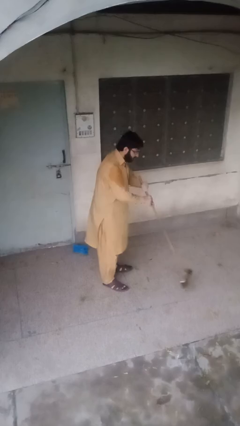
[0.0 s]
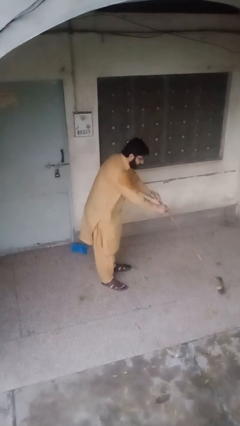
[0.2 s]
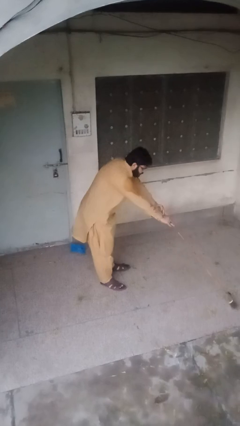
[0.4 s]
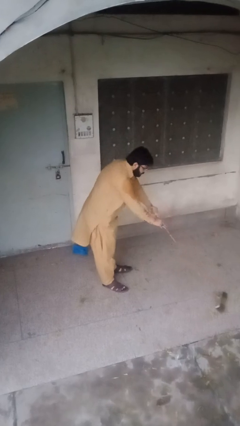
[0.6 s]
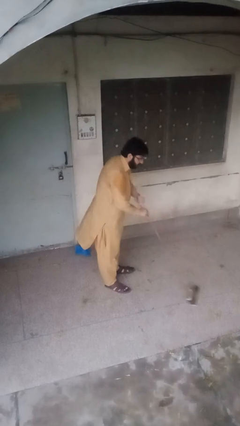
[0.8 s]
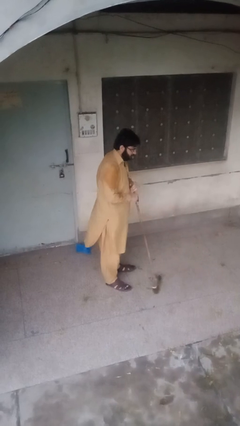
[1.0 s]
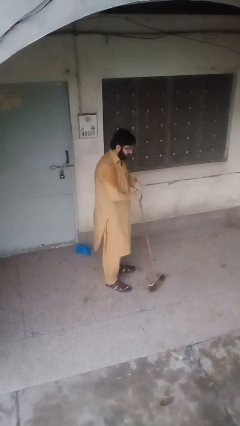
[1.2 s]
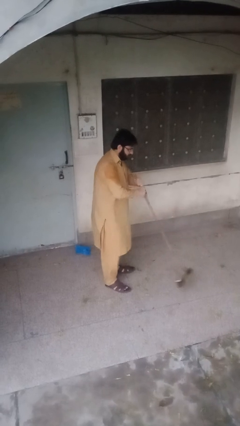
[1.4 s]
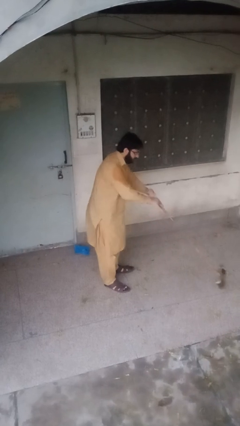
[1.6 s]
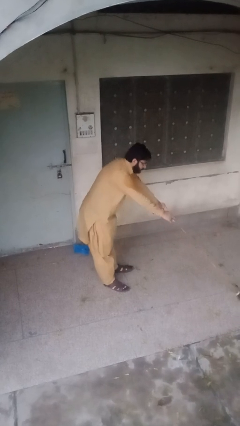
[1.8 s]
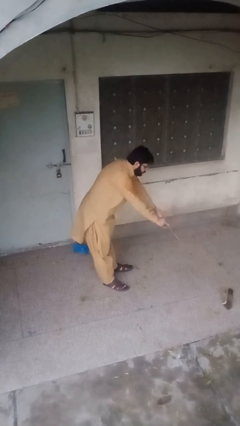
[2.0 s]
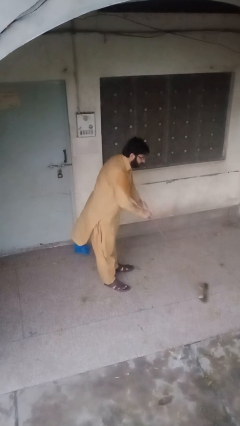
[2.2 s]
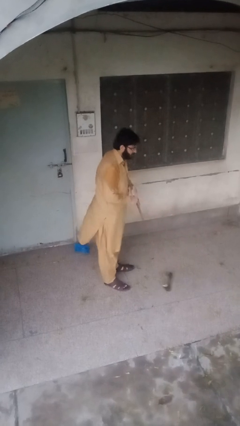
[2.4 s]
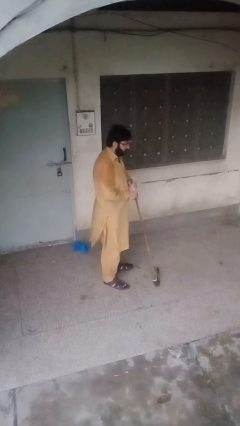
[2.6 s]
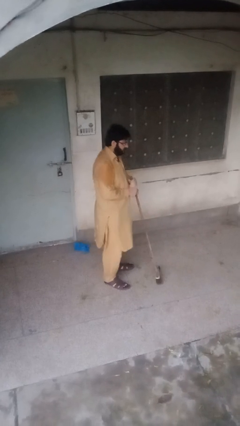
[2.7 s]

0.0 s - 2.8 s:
person sweeps floor

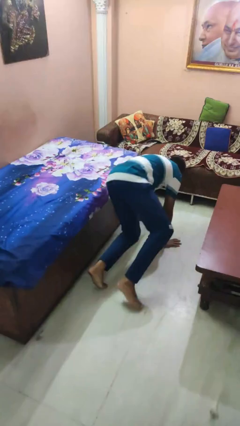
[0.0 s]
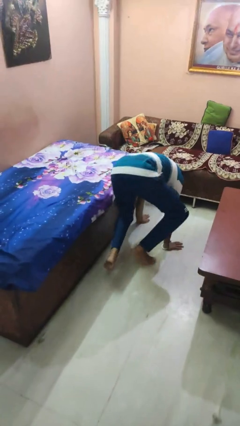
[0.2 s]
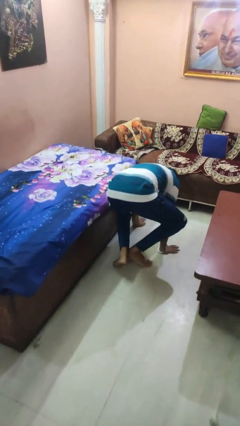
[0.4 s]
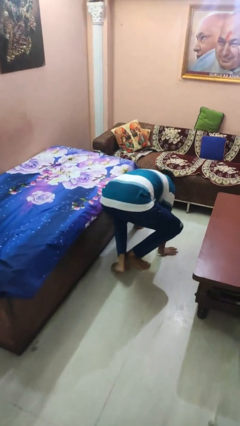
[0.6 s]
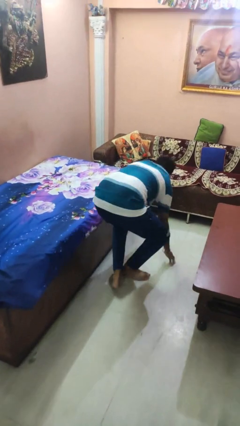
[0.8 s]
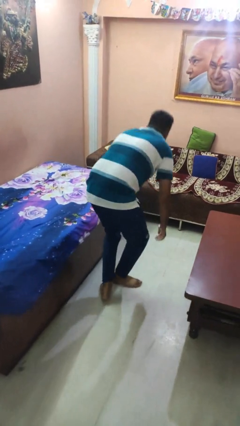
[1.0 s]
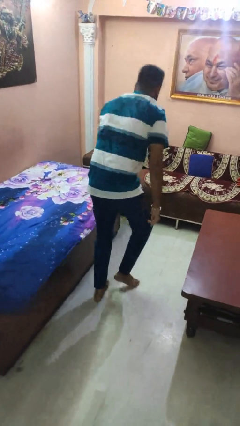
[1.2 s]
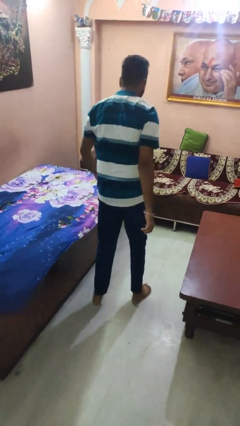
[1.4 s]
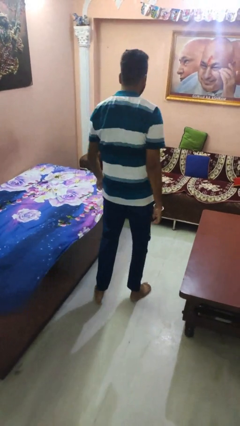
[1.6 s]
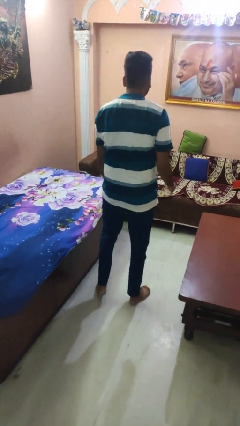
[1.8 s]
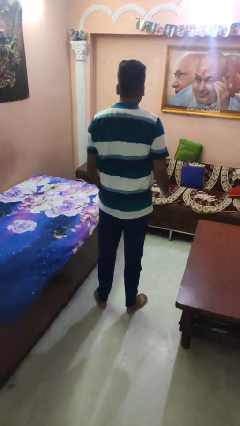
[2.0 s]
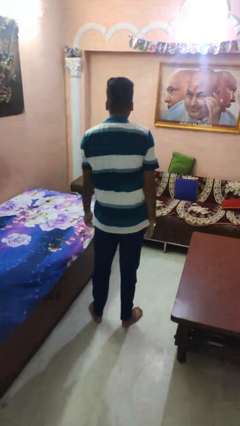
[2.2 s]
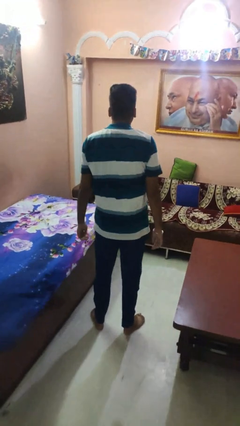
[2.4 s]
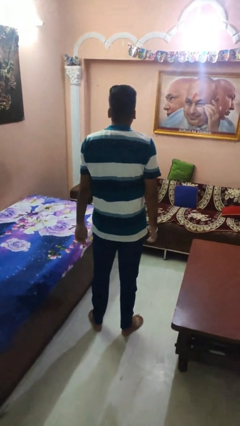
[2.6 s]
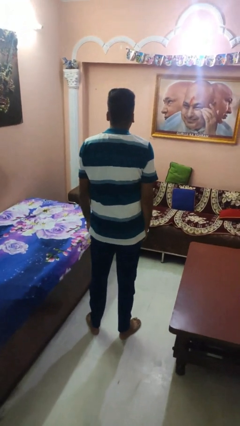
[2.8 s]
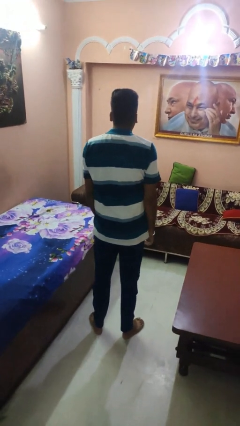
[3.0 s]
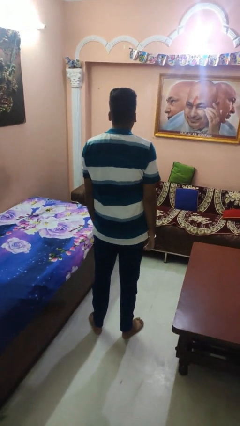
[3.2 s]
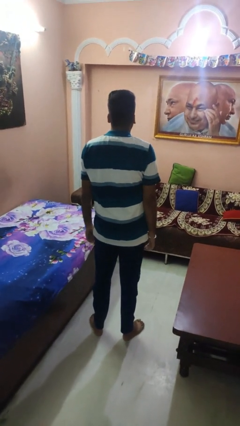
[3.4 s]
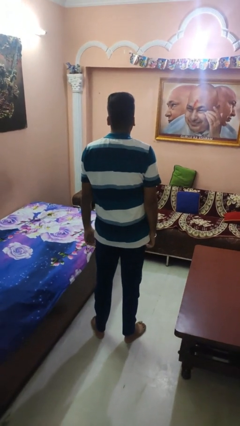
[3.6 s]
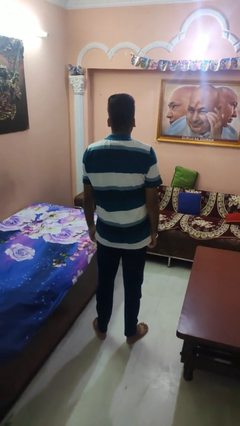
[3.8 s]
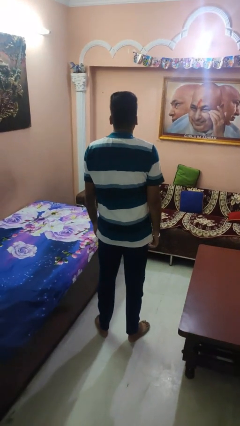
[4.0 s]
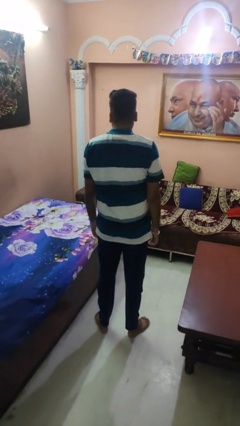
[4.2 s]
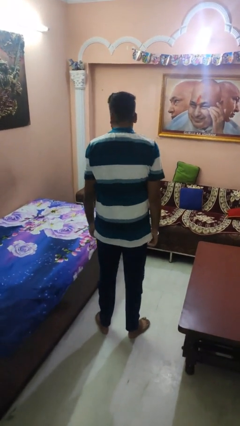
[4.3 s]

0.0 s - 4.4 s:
person stands up from floor

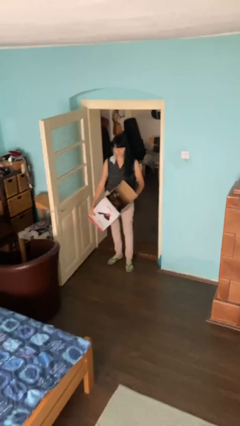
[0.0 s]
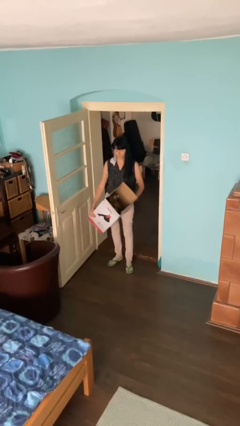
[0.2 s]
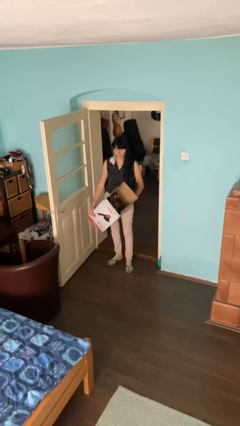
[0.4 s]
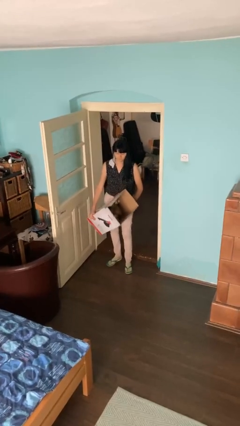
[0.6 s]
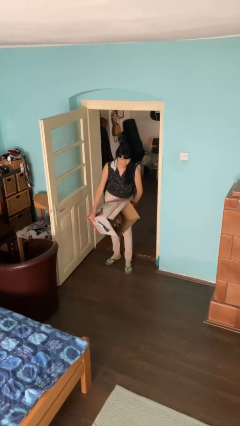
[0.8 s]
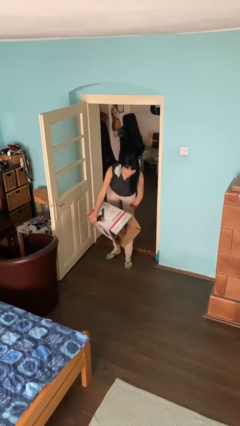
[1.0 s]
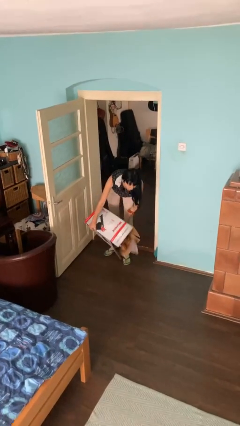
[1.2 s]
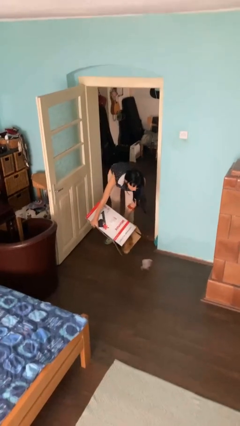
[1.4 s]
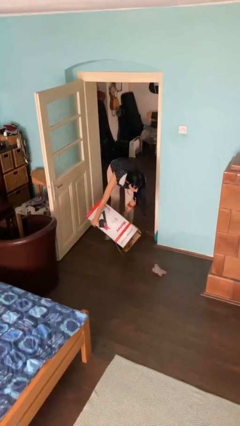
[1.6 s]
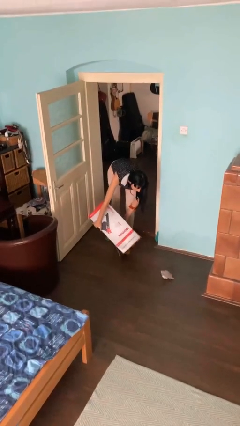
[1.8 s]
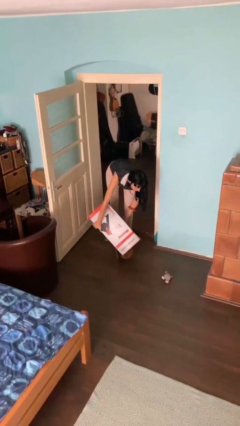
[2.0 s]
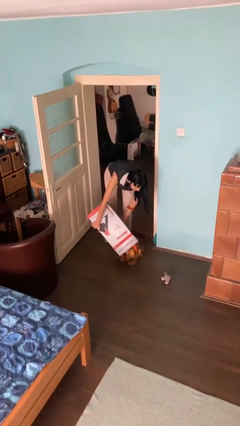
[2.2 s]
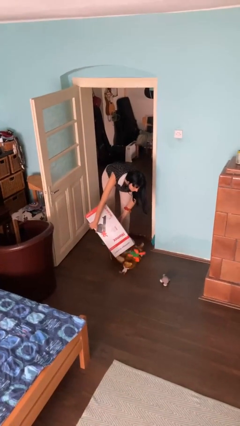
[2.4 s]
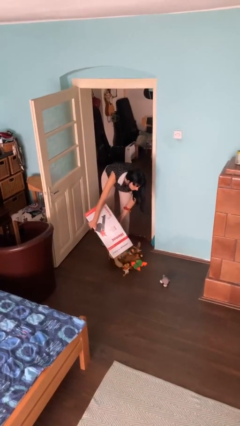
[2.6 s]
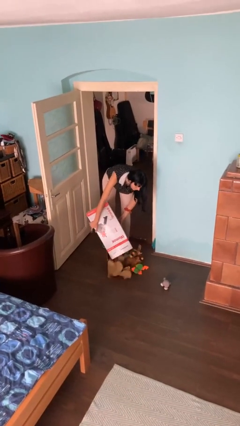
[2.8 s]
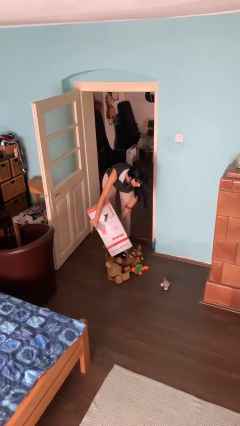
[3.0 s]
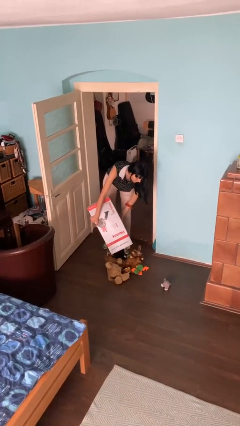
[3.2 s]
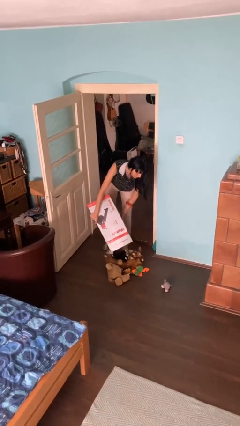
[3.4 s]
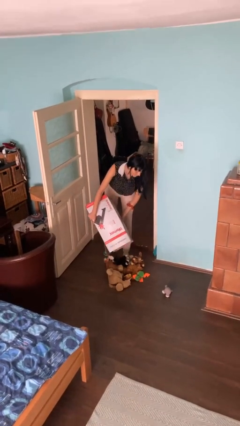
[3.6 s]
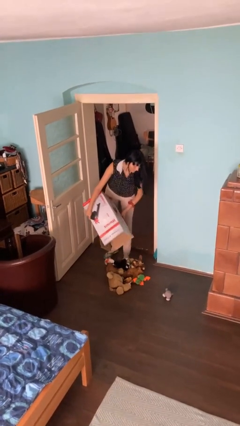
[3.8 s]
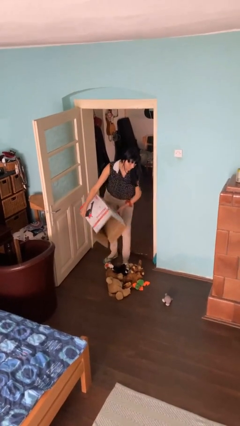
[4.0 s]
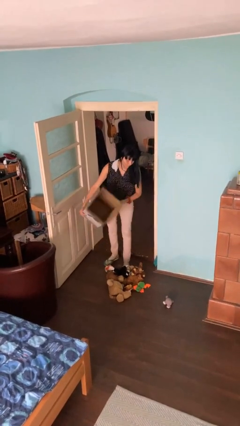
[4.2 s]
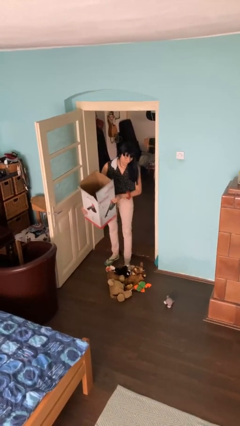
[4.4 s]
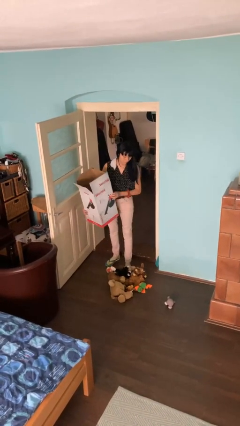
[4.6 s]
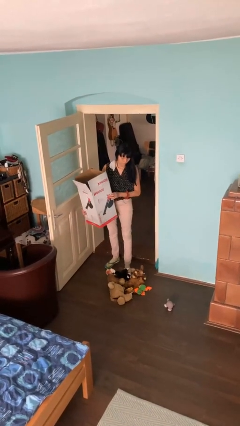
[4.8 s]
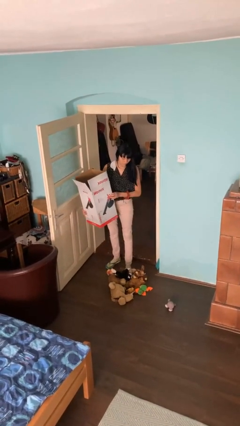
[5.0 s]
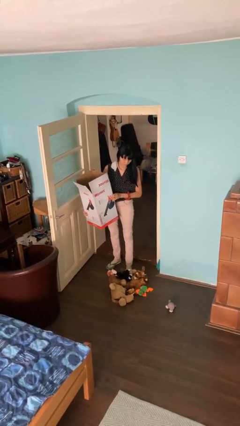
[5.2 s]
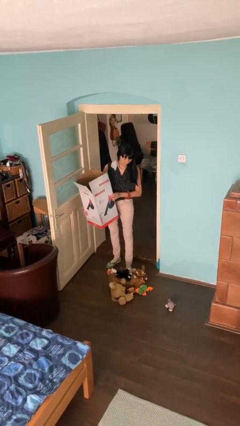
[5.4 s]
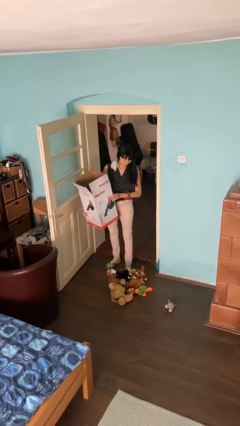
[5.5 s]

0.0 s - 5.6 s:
person unloads box onto floor

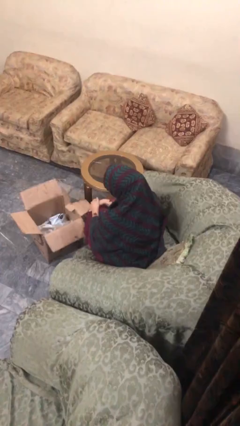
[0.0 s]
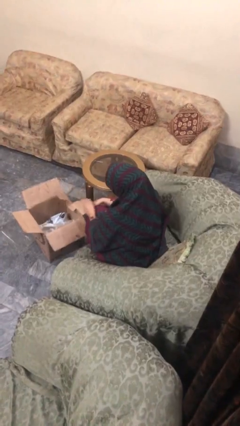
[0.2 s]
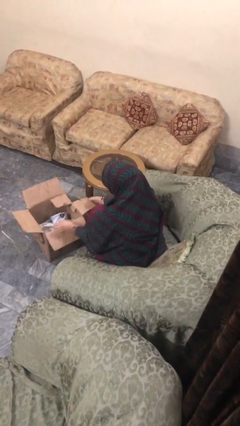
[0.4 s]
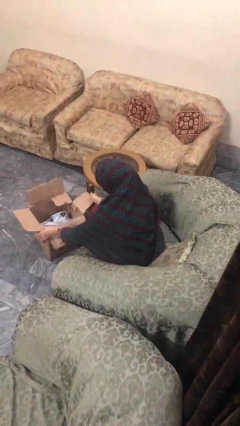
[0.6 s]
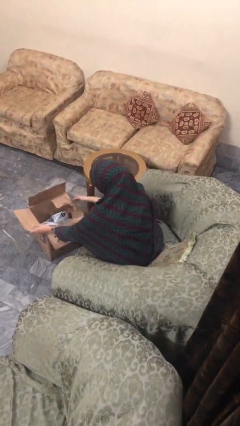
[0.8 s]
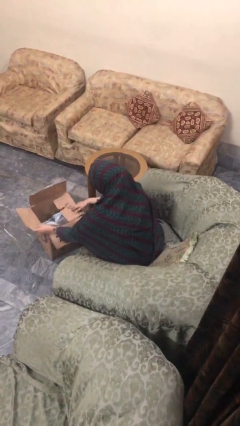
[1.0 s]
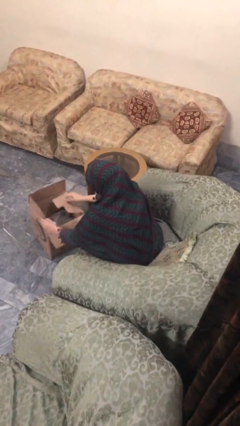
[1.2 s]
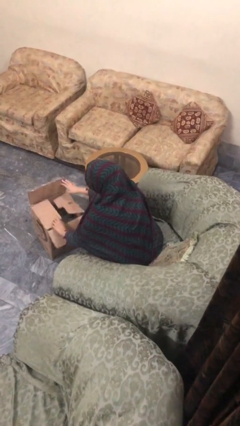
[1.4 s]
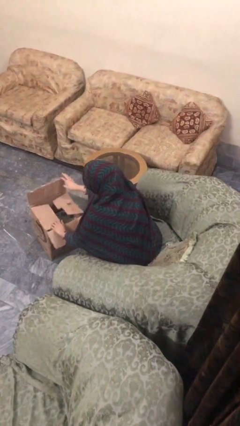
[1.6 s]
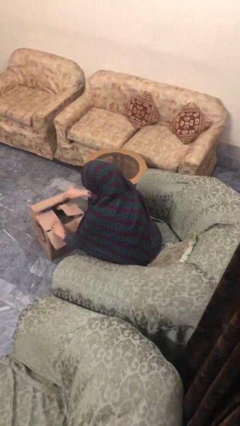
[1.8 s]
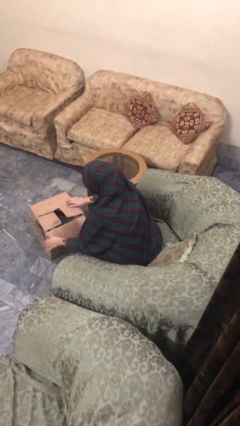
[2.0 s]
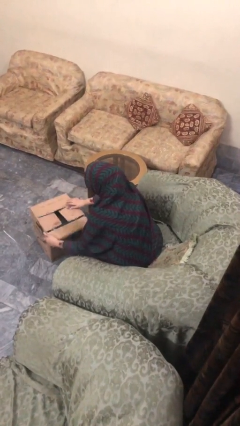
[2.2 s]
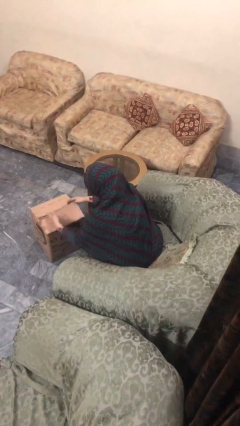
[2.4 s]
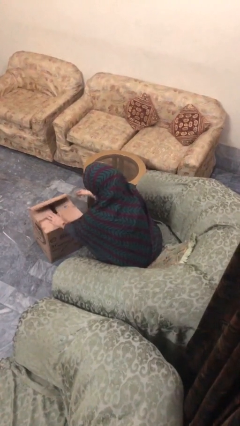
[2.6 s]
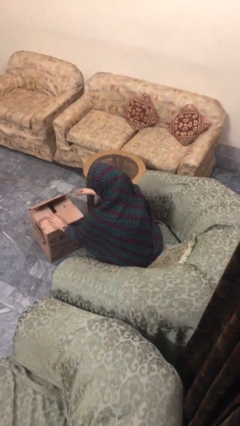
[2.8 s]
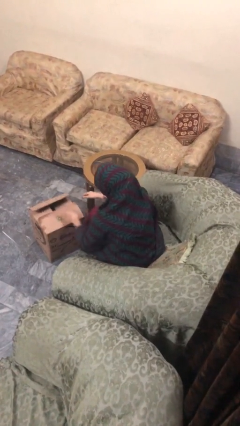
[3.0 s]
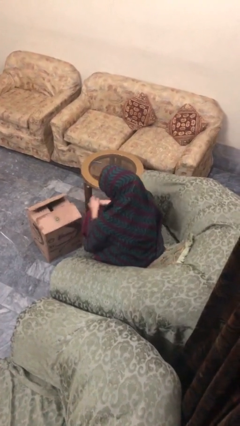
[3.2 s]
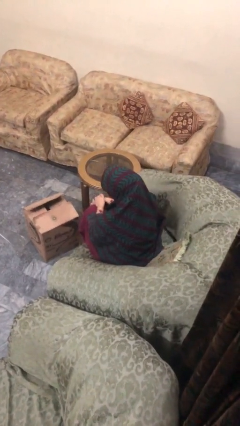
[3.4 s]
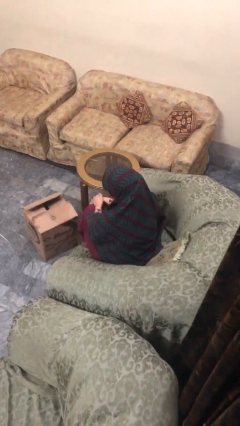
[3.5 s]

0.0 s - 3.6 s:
person closes box

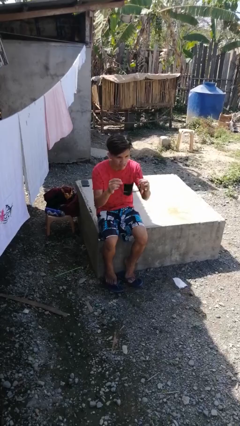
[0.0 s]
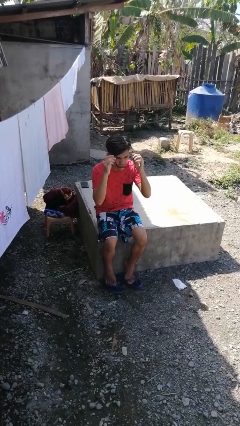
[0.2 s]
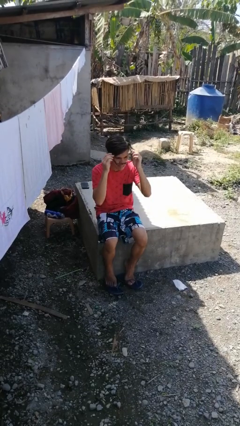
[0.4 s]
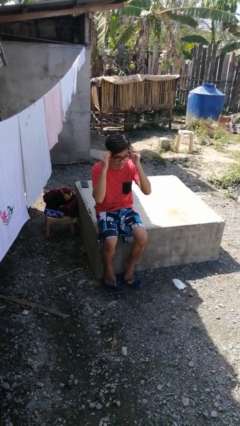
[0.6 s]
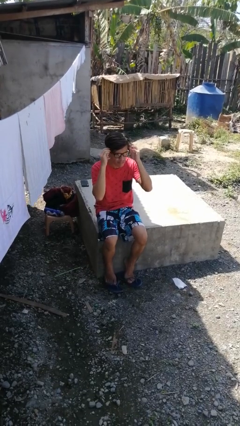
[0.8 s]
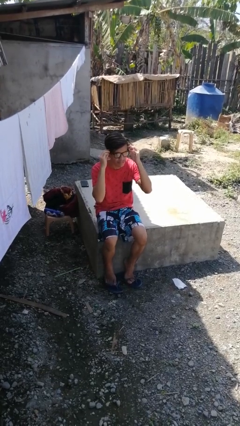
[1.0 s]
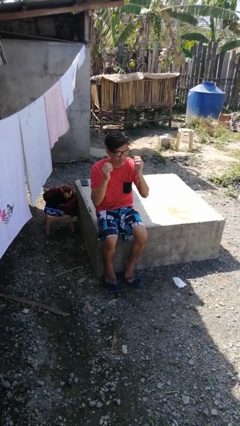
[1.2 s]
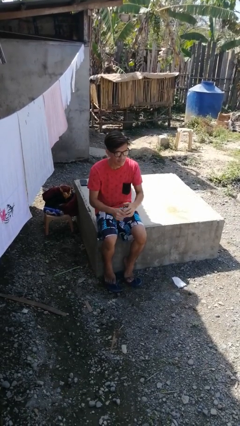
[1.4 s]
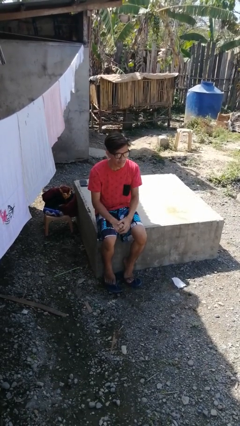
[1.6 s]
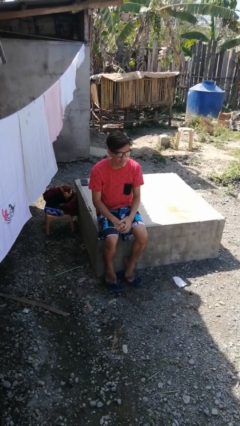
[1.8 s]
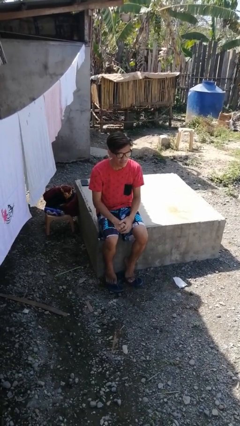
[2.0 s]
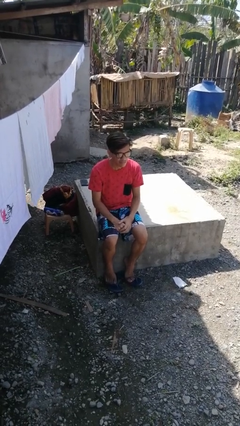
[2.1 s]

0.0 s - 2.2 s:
person puts on glasses
